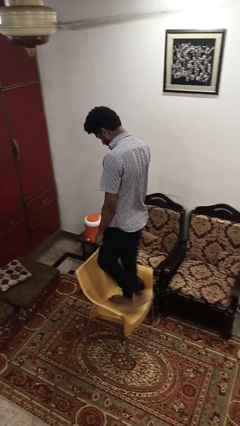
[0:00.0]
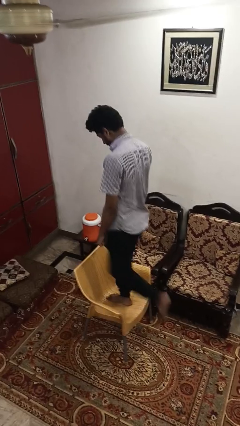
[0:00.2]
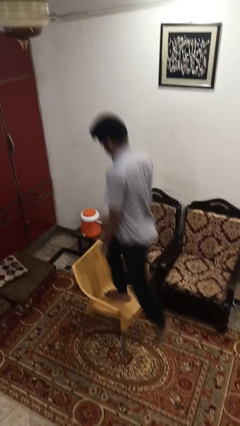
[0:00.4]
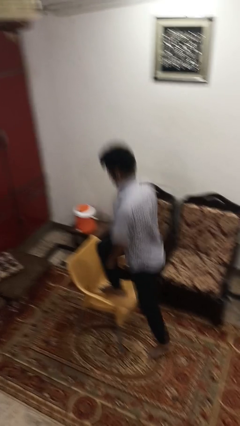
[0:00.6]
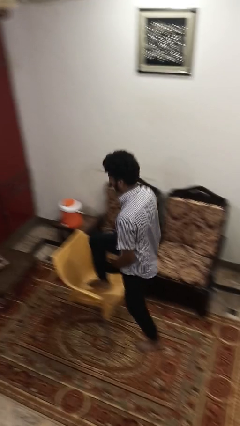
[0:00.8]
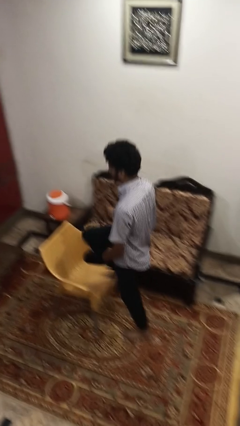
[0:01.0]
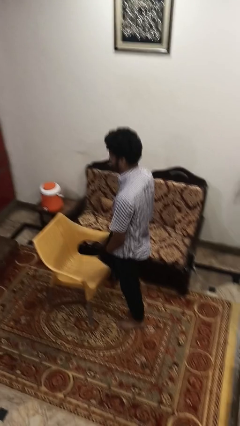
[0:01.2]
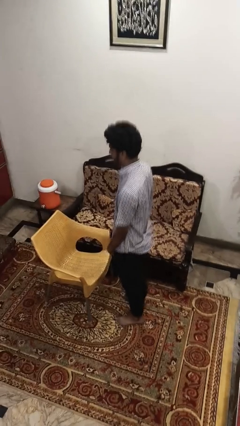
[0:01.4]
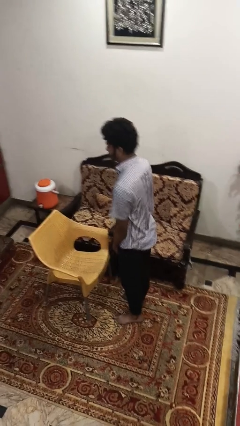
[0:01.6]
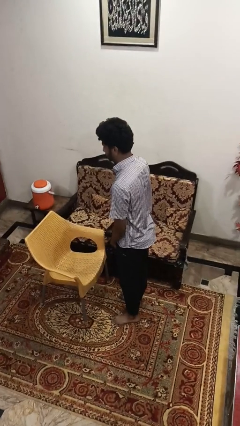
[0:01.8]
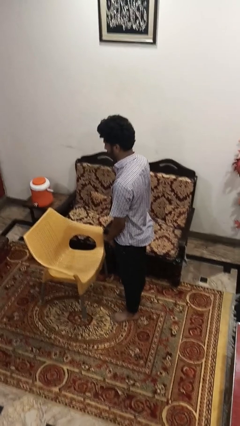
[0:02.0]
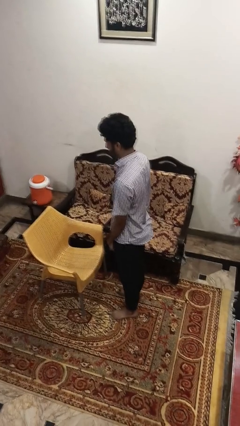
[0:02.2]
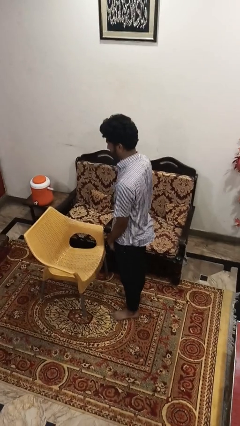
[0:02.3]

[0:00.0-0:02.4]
person climbs off chair

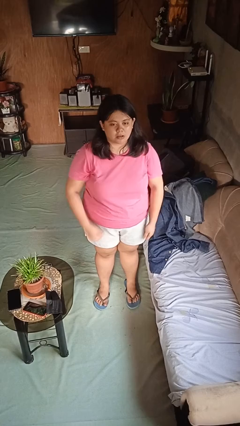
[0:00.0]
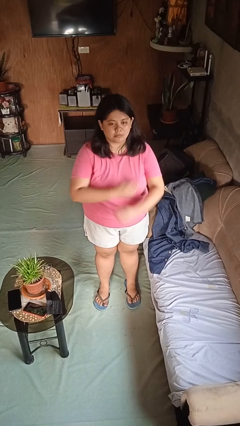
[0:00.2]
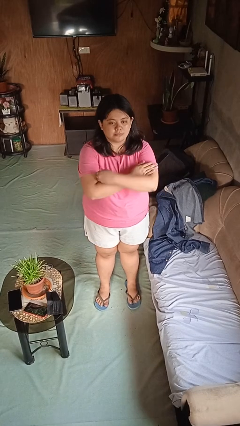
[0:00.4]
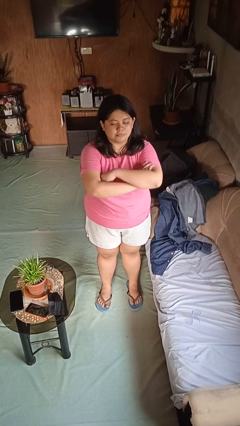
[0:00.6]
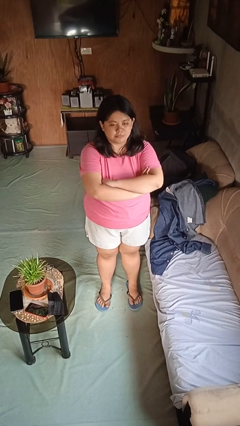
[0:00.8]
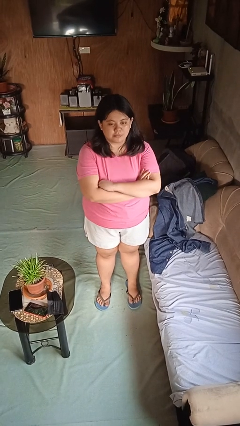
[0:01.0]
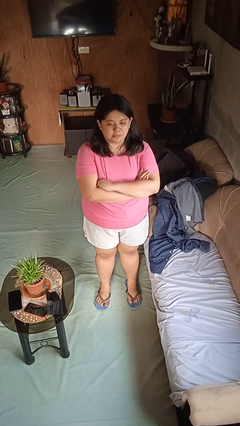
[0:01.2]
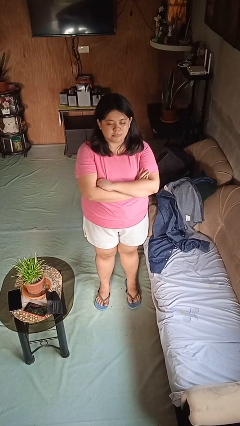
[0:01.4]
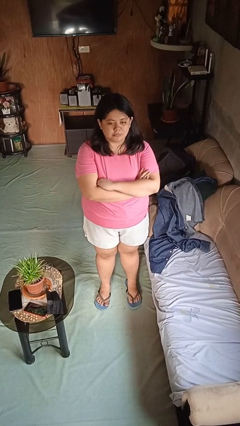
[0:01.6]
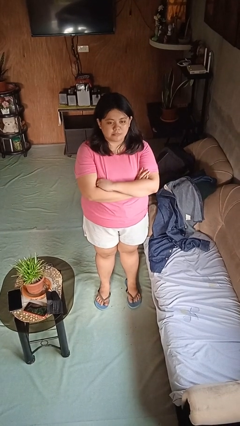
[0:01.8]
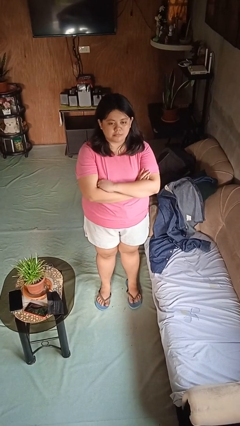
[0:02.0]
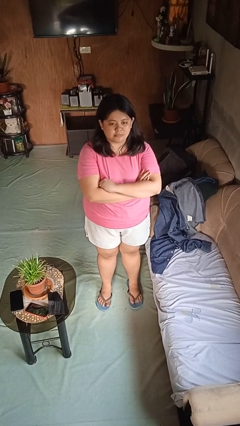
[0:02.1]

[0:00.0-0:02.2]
person crosses arms

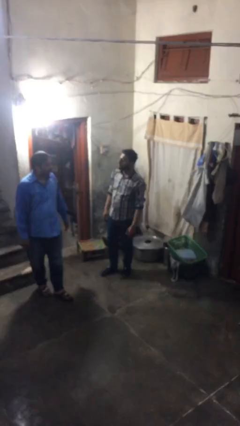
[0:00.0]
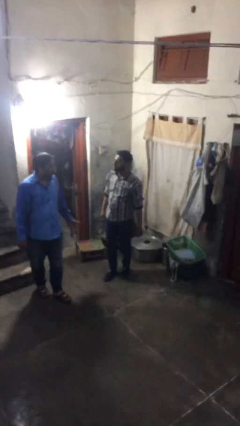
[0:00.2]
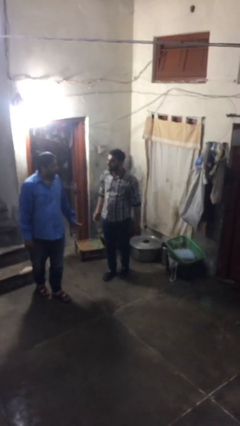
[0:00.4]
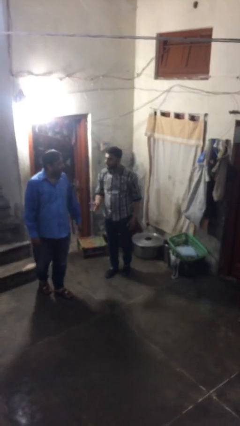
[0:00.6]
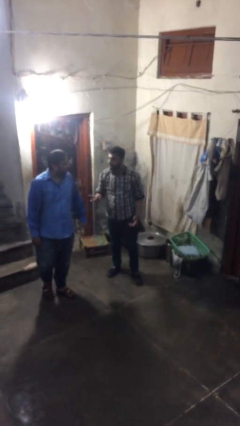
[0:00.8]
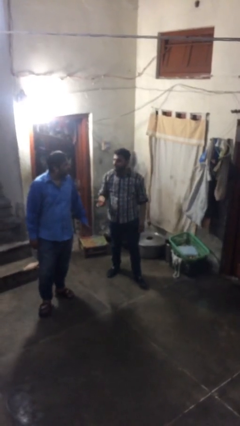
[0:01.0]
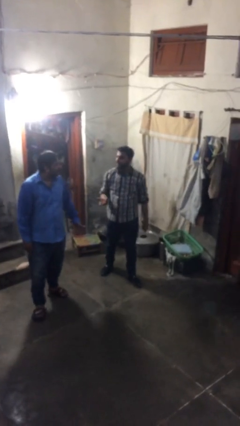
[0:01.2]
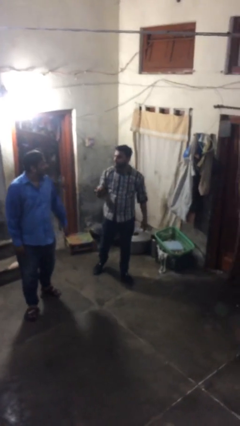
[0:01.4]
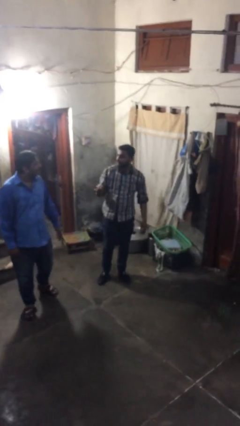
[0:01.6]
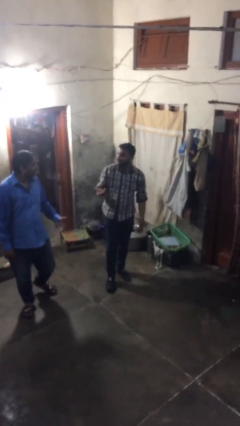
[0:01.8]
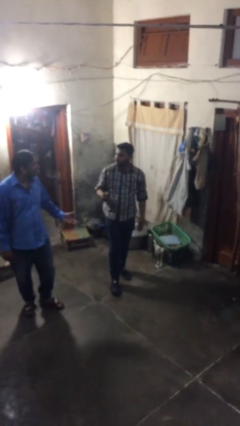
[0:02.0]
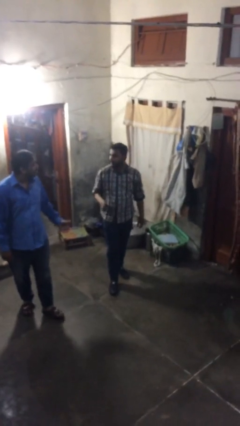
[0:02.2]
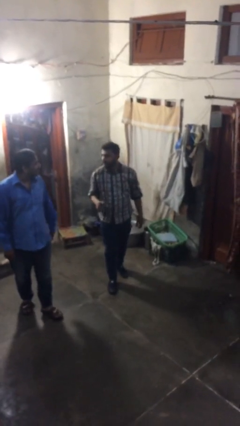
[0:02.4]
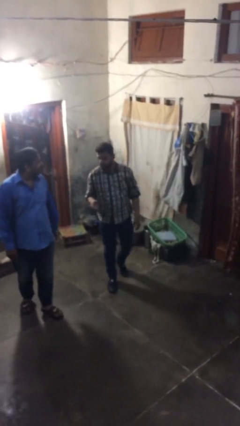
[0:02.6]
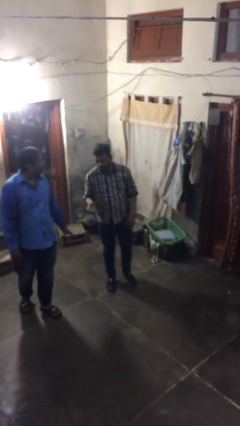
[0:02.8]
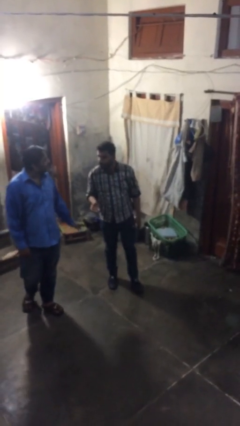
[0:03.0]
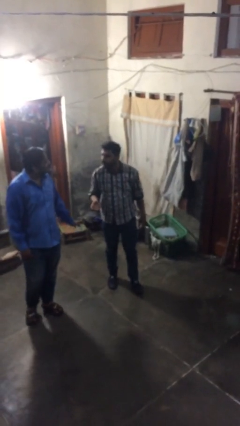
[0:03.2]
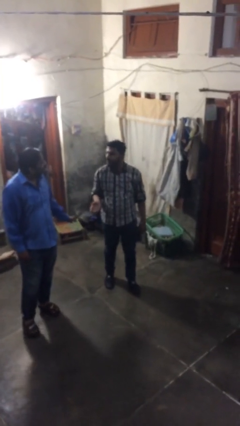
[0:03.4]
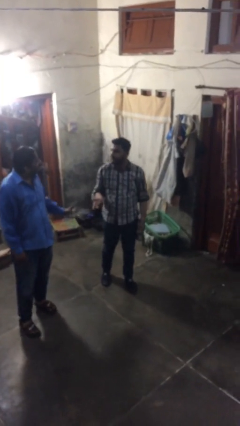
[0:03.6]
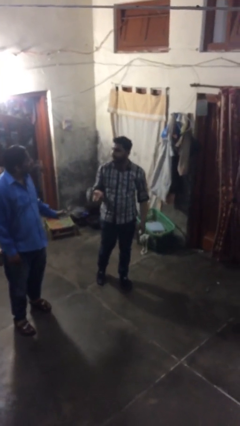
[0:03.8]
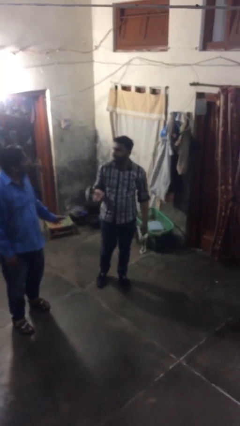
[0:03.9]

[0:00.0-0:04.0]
person talks to person

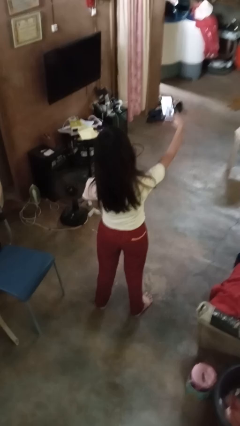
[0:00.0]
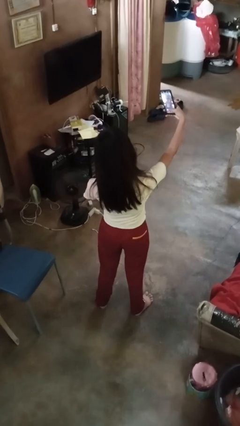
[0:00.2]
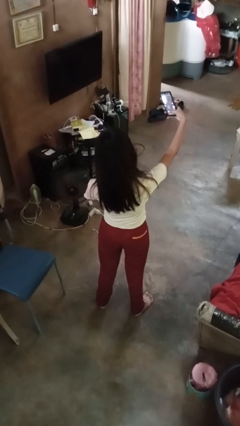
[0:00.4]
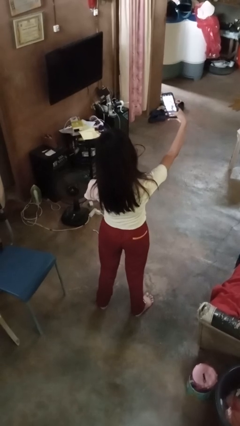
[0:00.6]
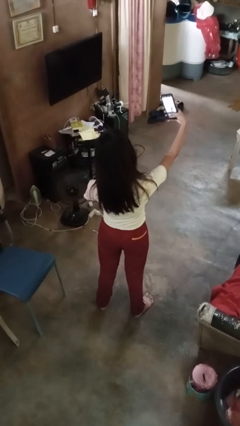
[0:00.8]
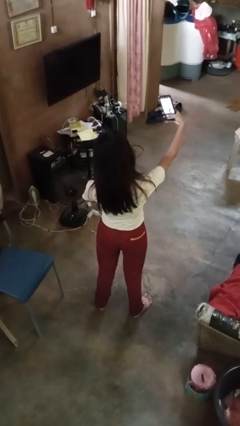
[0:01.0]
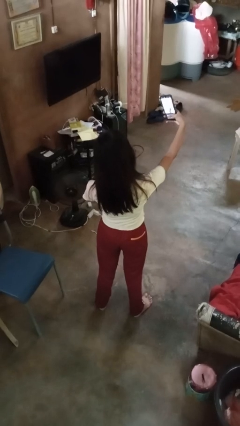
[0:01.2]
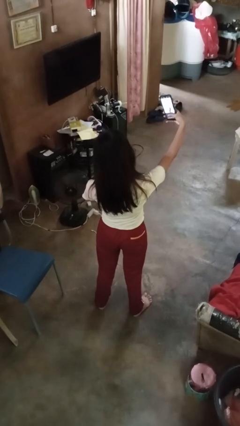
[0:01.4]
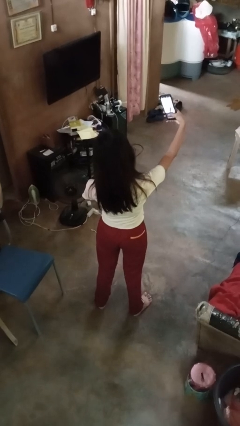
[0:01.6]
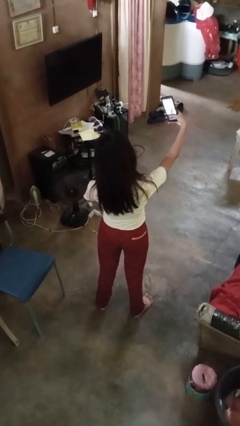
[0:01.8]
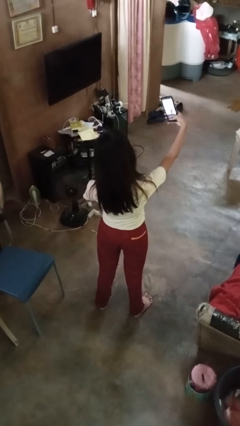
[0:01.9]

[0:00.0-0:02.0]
person takes selfie

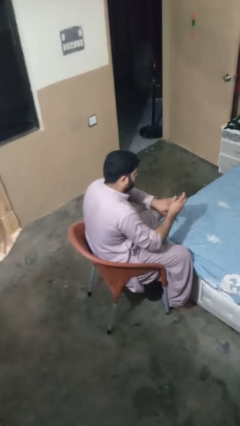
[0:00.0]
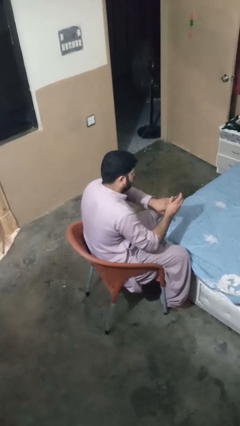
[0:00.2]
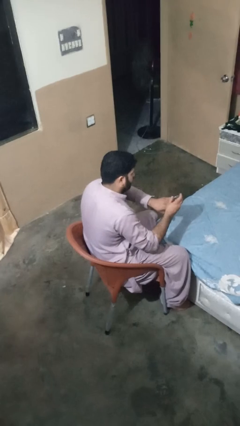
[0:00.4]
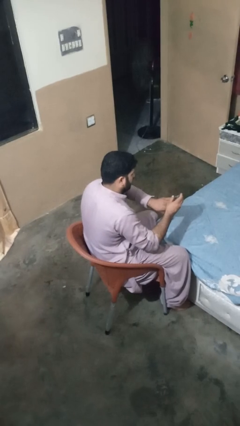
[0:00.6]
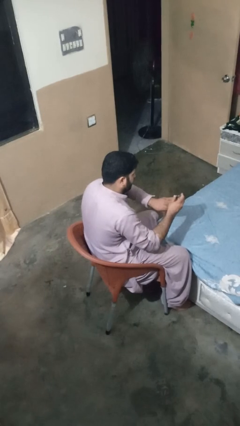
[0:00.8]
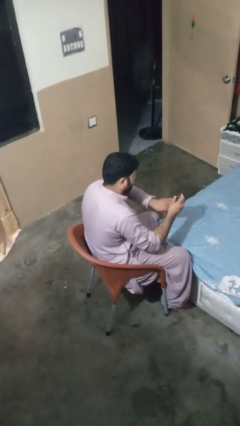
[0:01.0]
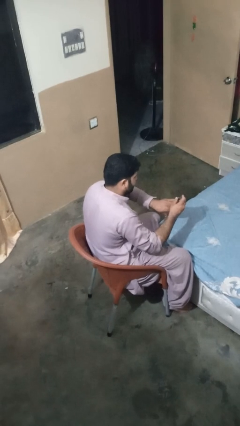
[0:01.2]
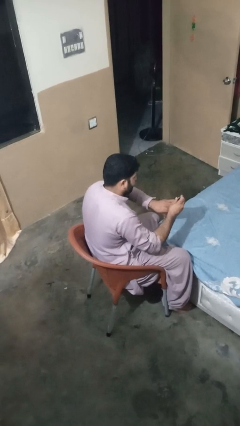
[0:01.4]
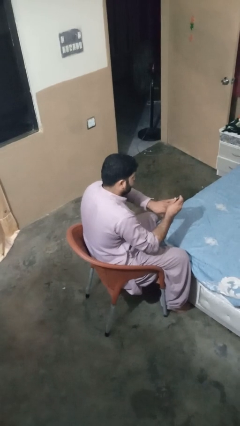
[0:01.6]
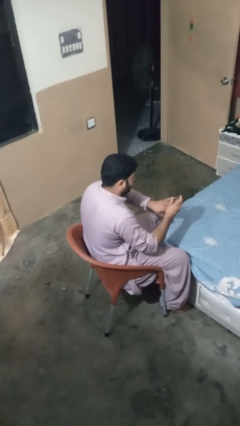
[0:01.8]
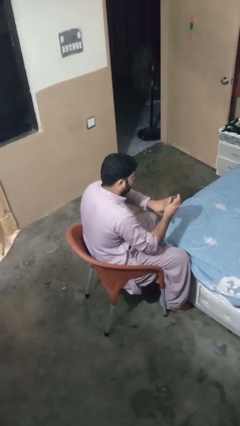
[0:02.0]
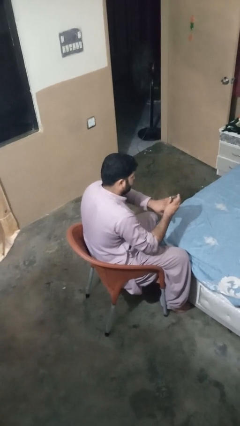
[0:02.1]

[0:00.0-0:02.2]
person clips fingernails

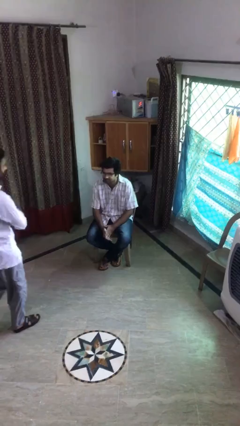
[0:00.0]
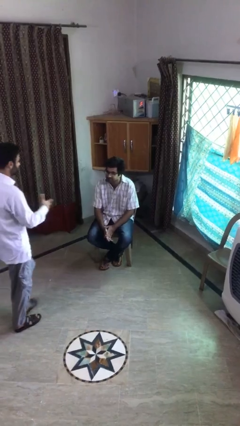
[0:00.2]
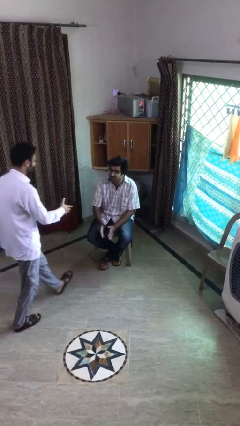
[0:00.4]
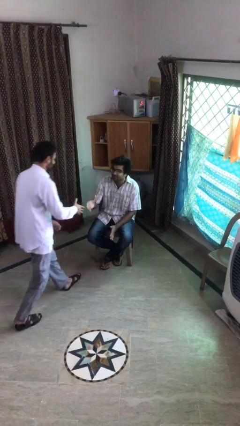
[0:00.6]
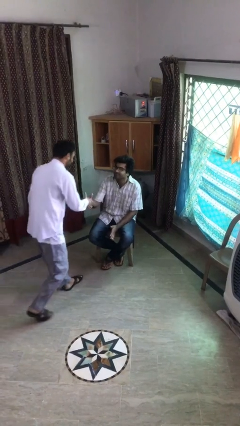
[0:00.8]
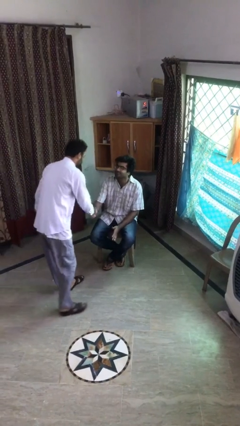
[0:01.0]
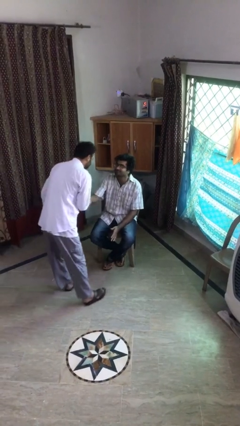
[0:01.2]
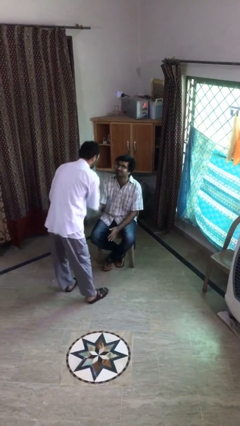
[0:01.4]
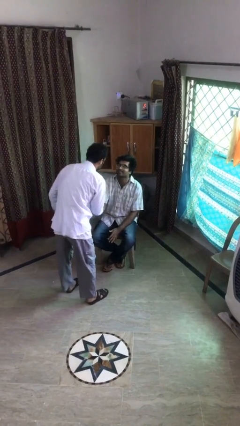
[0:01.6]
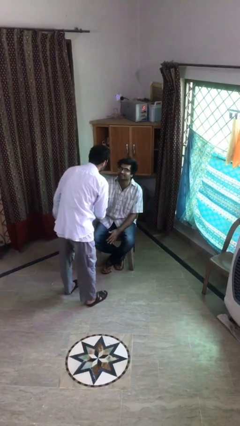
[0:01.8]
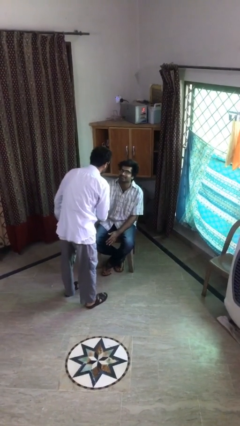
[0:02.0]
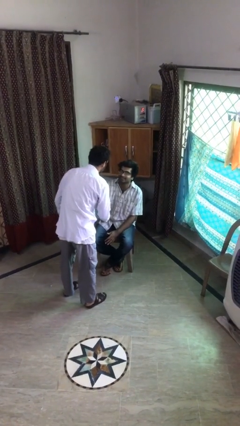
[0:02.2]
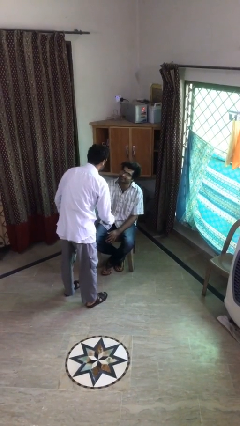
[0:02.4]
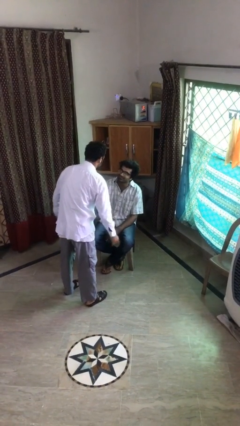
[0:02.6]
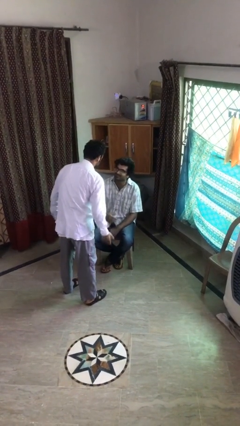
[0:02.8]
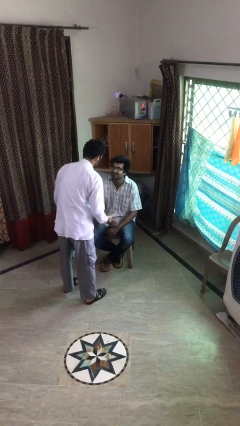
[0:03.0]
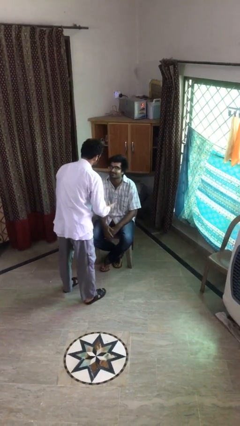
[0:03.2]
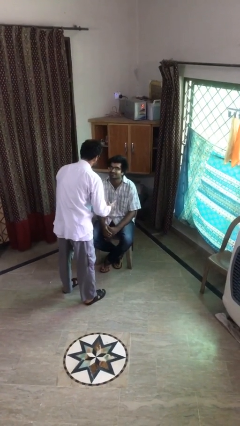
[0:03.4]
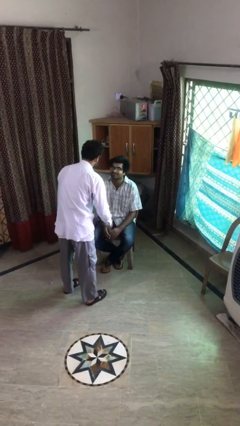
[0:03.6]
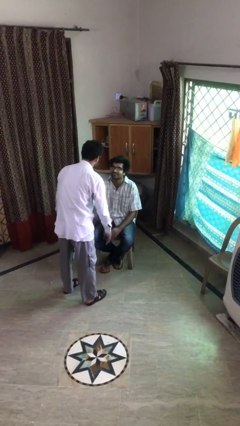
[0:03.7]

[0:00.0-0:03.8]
person shakes hand

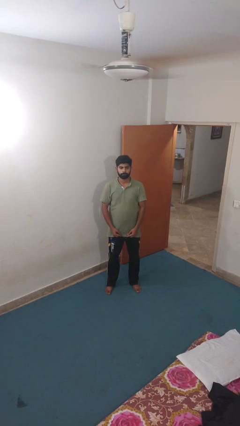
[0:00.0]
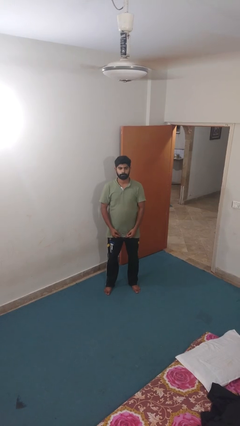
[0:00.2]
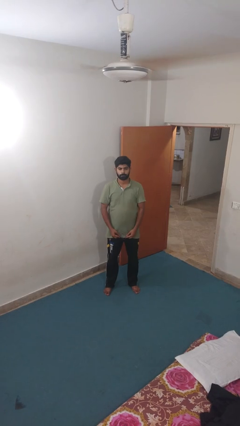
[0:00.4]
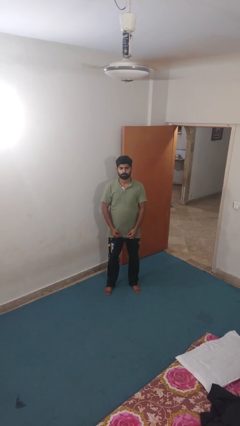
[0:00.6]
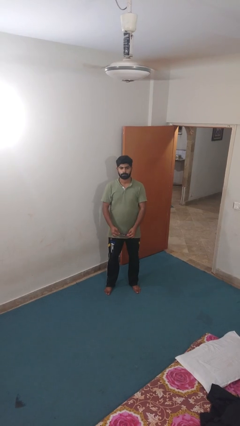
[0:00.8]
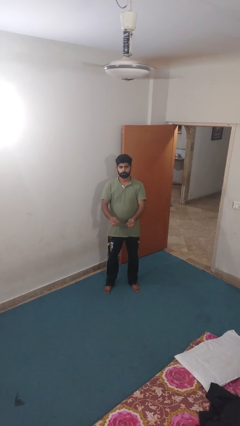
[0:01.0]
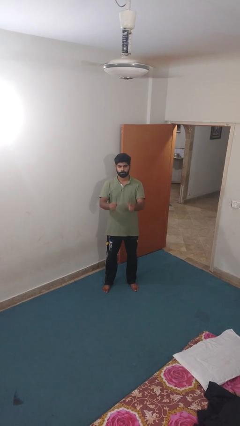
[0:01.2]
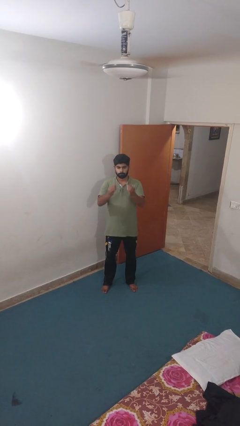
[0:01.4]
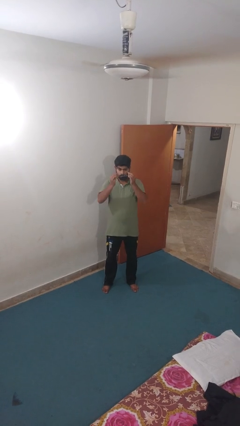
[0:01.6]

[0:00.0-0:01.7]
person puts on glasses
